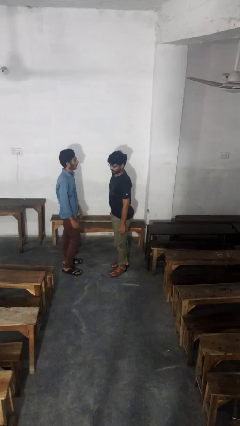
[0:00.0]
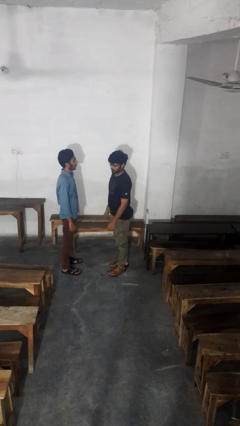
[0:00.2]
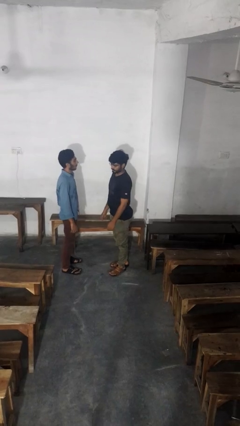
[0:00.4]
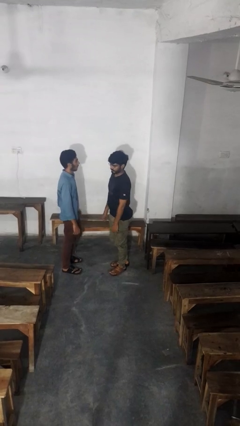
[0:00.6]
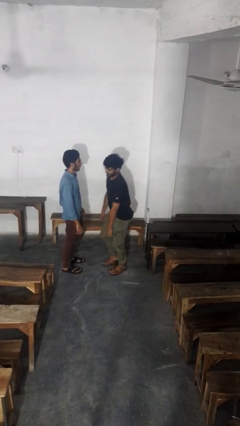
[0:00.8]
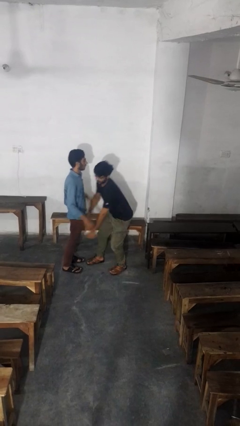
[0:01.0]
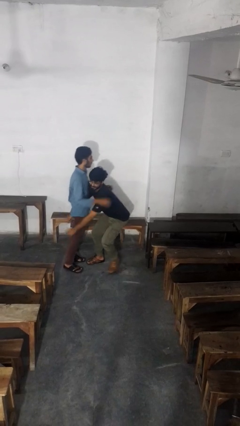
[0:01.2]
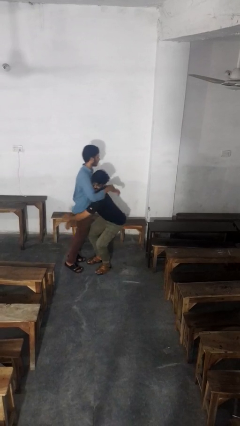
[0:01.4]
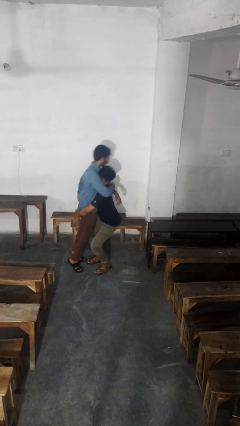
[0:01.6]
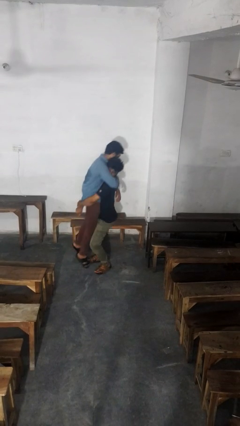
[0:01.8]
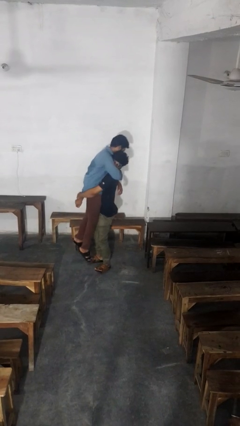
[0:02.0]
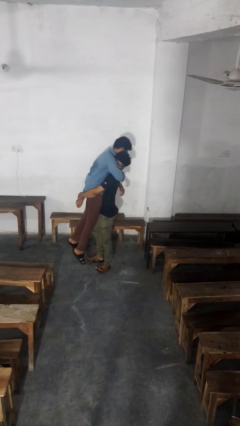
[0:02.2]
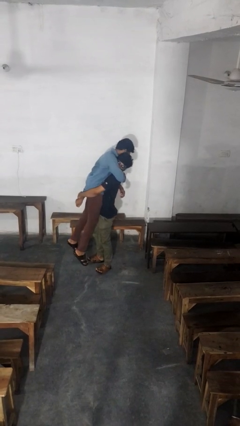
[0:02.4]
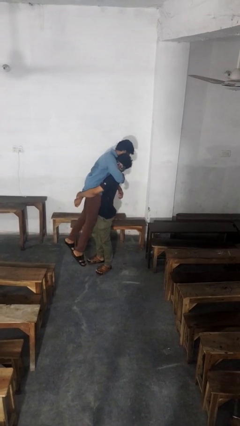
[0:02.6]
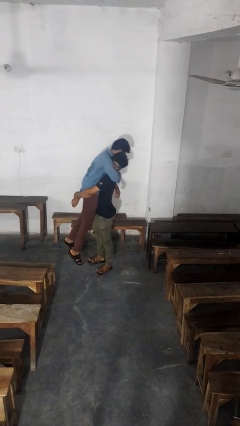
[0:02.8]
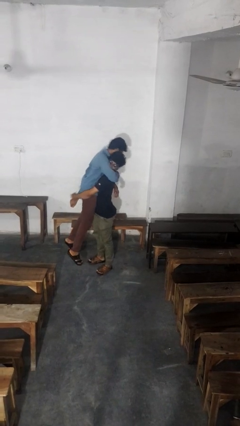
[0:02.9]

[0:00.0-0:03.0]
person picks up person

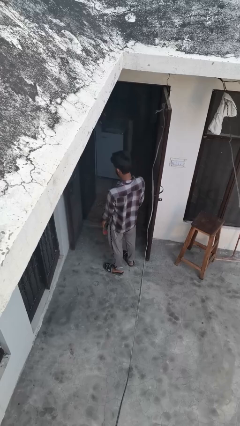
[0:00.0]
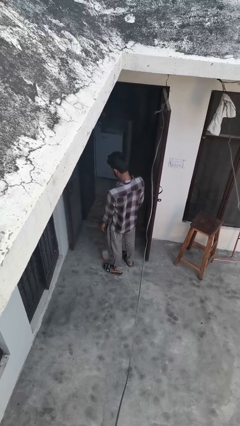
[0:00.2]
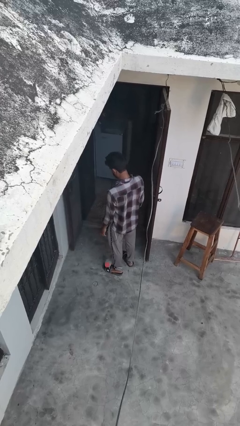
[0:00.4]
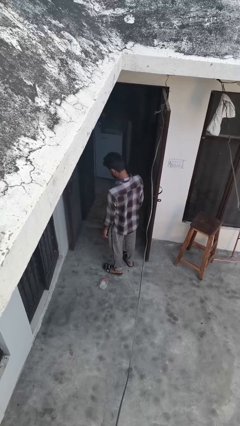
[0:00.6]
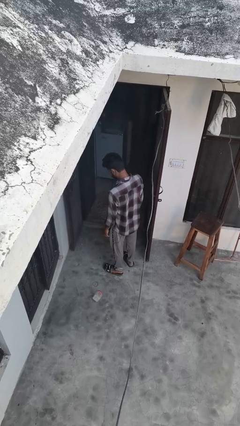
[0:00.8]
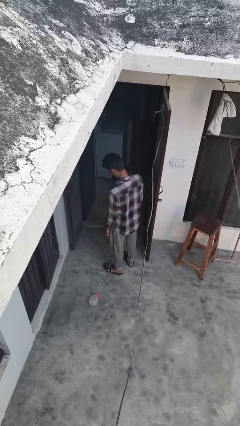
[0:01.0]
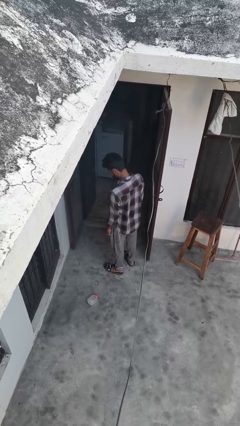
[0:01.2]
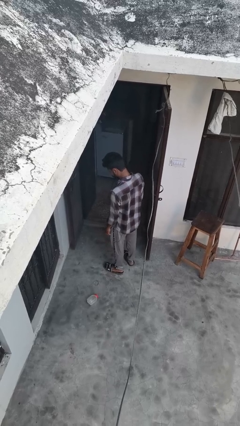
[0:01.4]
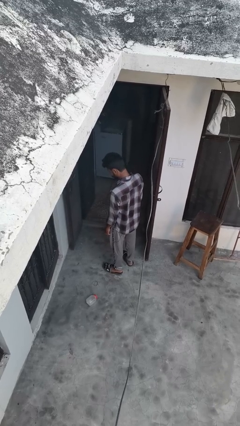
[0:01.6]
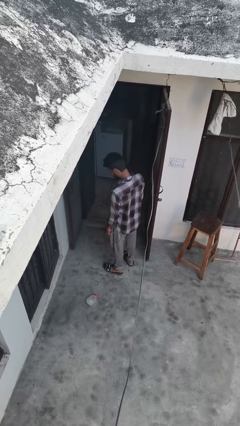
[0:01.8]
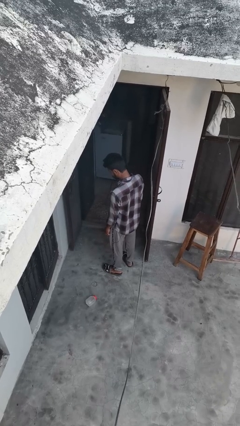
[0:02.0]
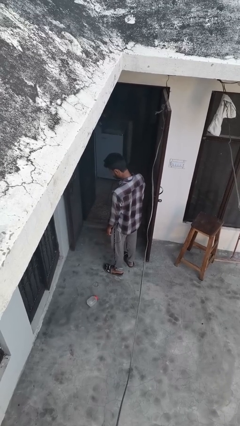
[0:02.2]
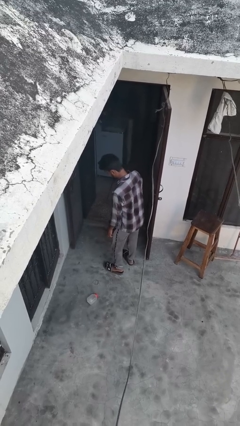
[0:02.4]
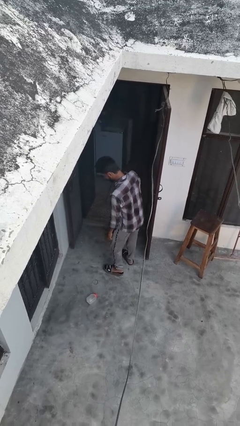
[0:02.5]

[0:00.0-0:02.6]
person drops object

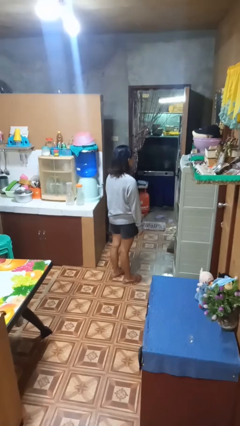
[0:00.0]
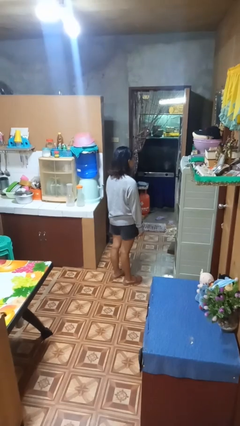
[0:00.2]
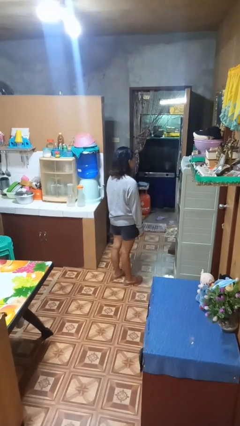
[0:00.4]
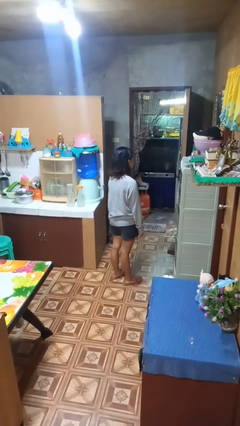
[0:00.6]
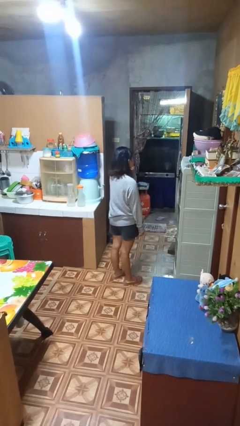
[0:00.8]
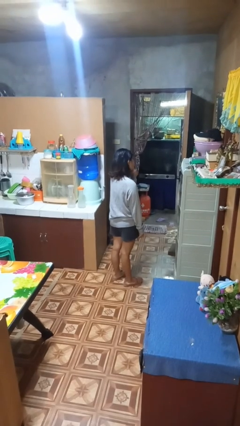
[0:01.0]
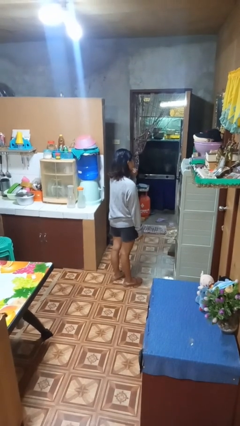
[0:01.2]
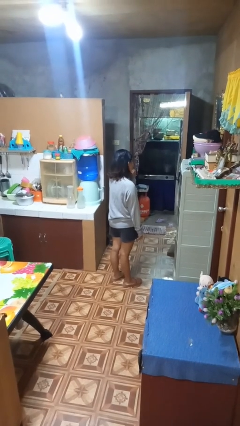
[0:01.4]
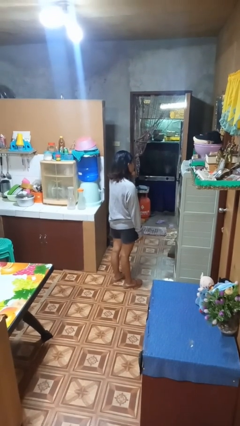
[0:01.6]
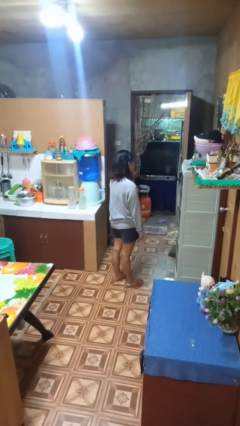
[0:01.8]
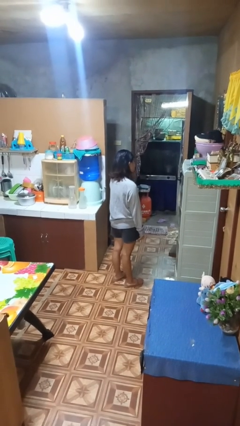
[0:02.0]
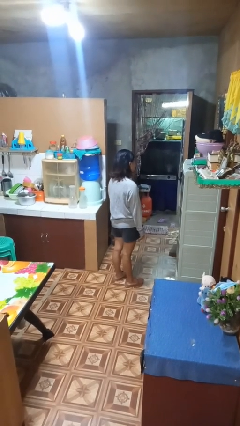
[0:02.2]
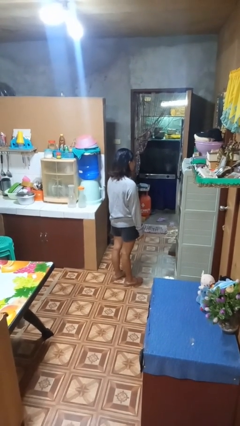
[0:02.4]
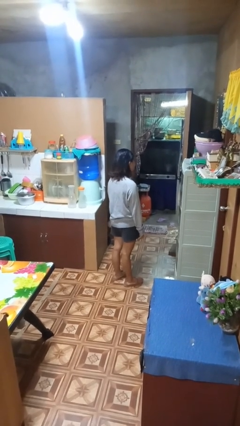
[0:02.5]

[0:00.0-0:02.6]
person strokes chin

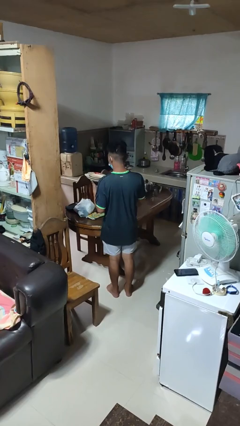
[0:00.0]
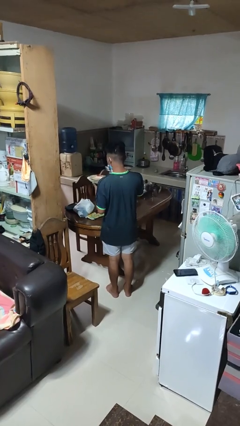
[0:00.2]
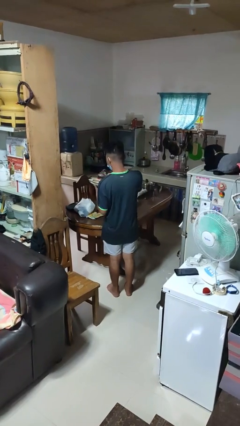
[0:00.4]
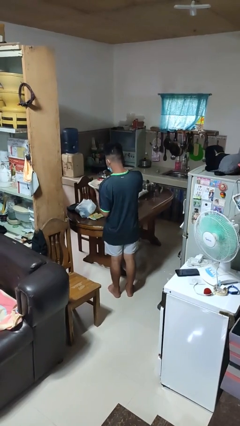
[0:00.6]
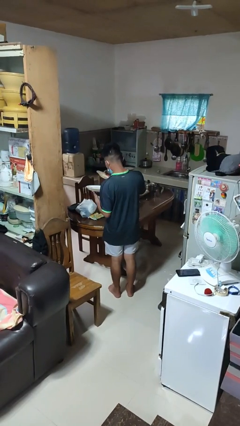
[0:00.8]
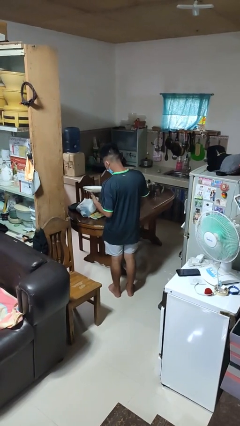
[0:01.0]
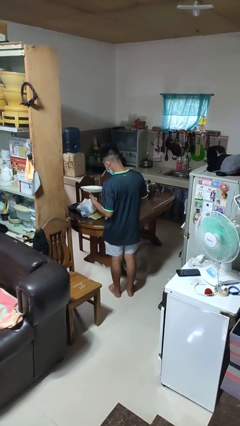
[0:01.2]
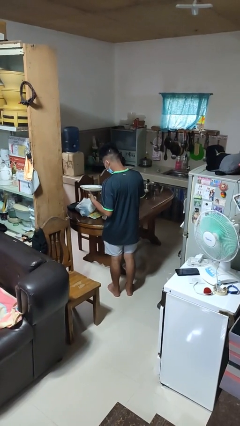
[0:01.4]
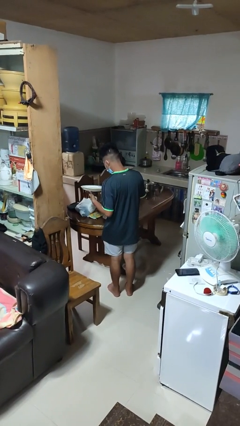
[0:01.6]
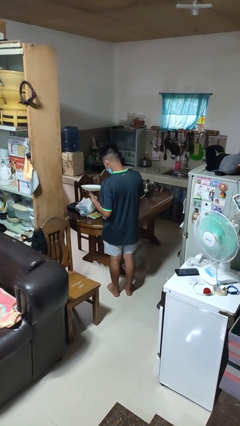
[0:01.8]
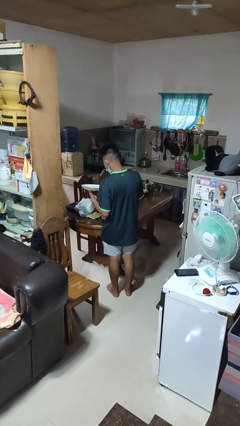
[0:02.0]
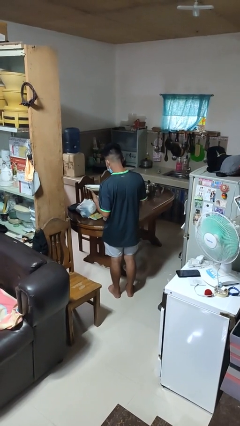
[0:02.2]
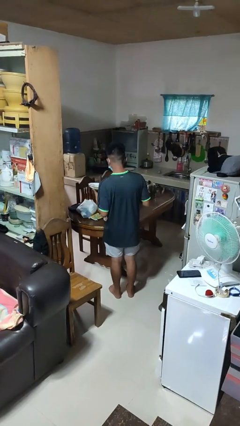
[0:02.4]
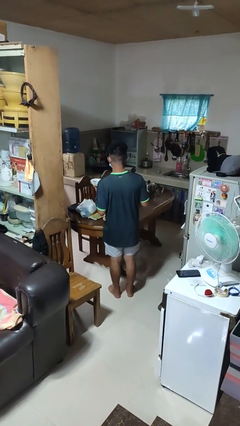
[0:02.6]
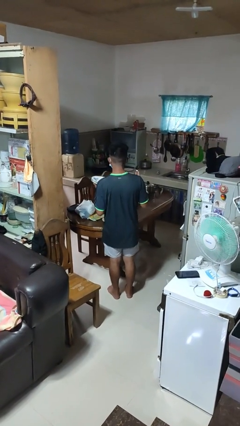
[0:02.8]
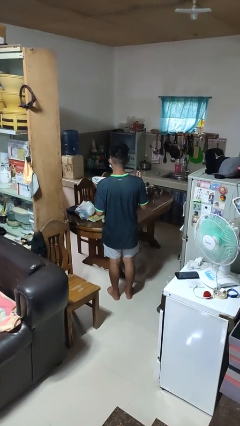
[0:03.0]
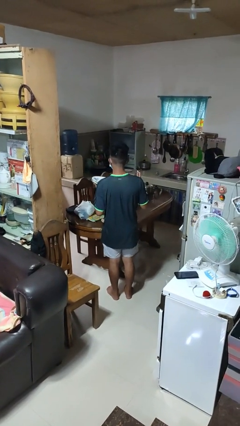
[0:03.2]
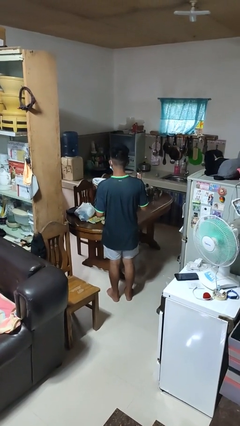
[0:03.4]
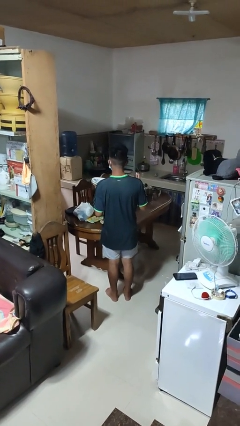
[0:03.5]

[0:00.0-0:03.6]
person sets table

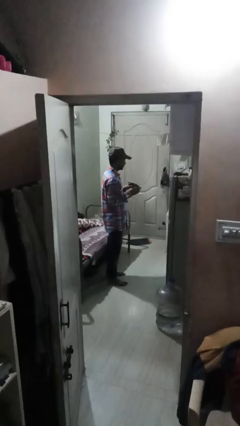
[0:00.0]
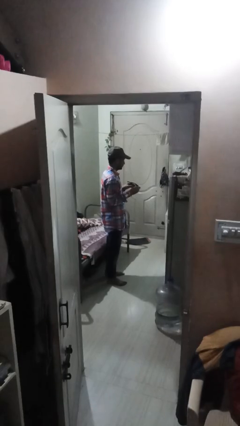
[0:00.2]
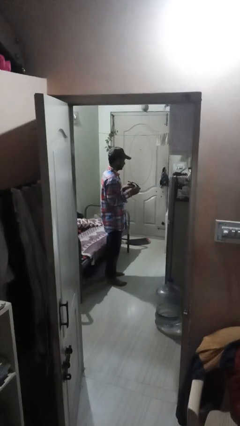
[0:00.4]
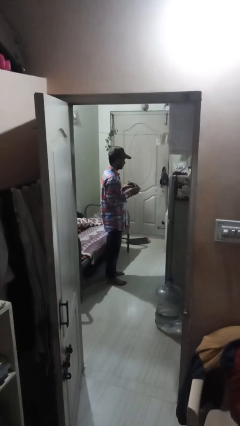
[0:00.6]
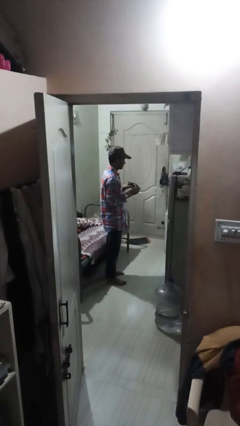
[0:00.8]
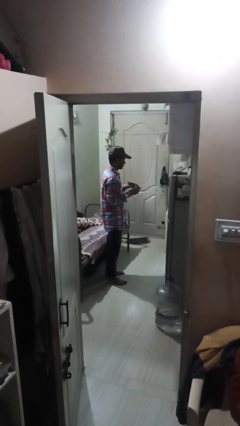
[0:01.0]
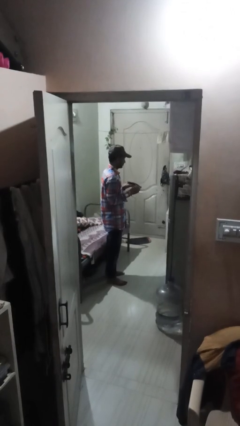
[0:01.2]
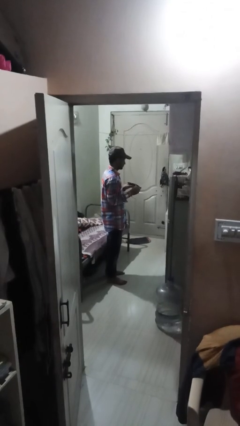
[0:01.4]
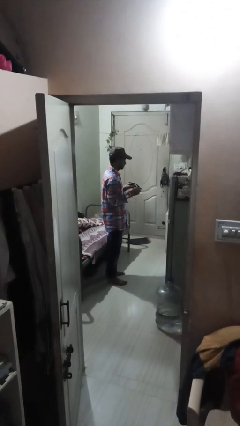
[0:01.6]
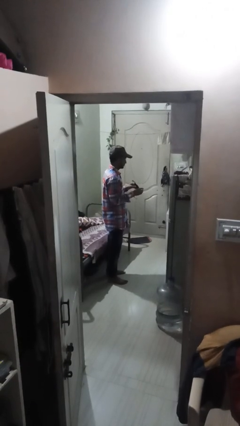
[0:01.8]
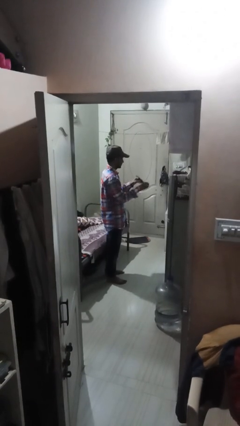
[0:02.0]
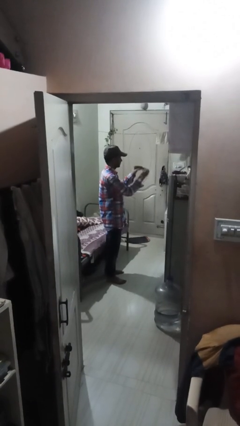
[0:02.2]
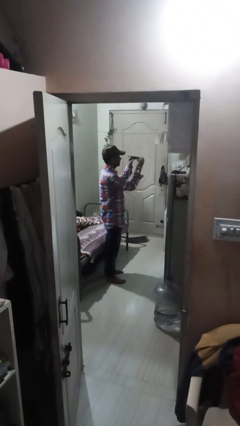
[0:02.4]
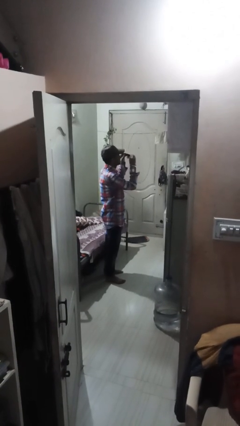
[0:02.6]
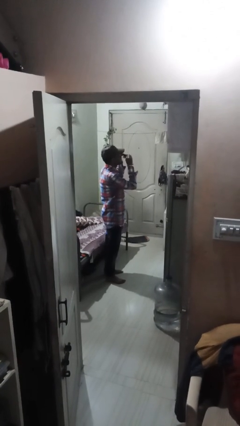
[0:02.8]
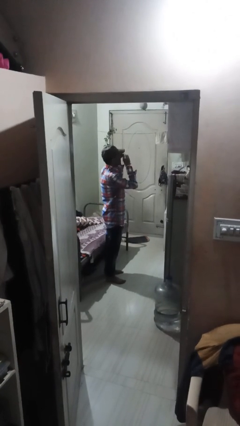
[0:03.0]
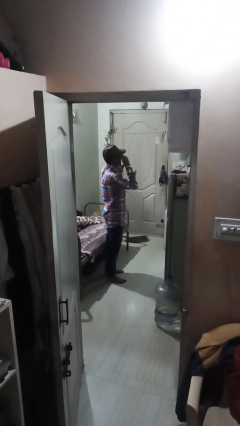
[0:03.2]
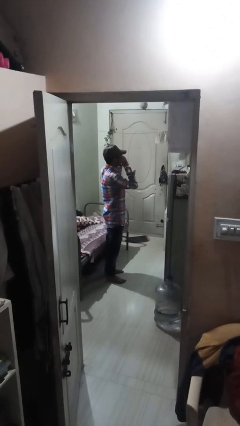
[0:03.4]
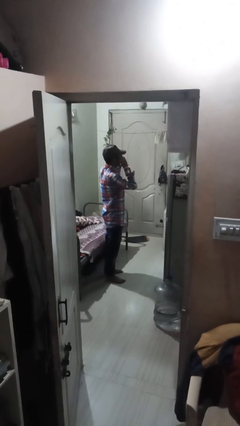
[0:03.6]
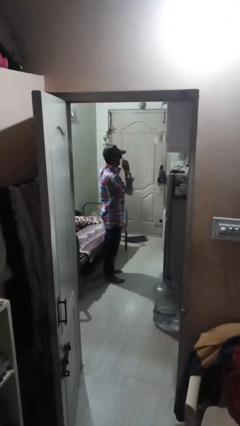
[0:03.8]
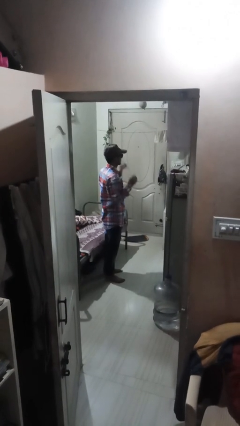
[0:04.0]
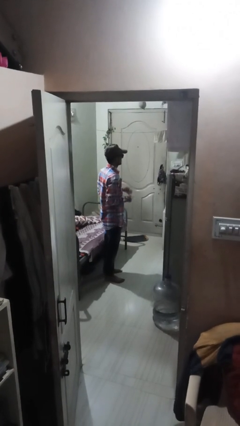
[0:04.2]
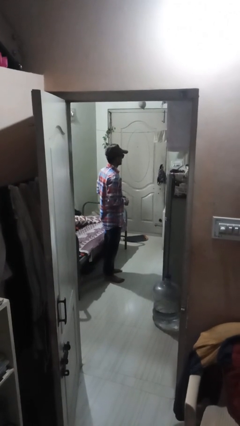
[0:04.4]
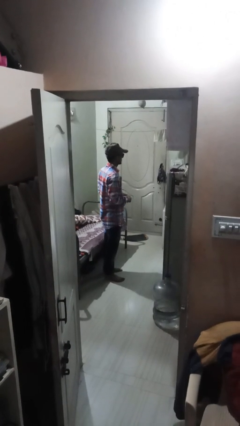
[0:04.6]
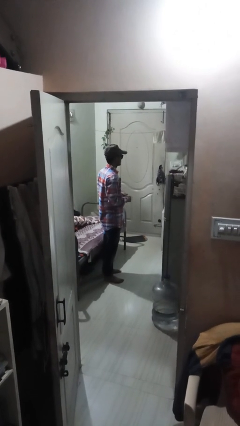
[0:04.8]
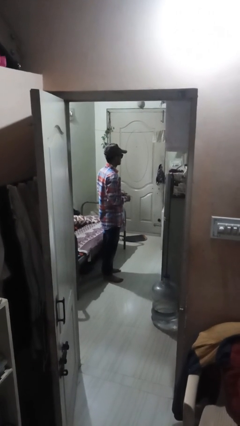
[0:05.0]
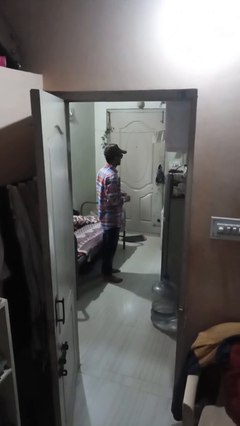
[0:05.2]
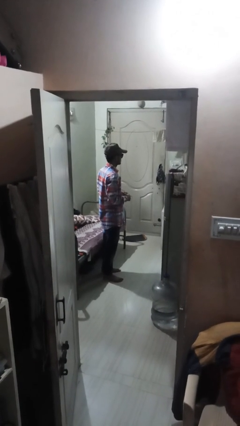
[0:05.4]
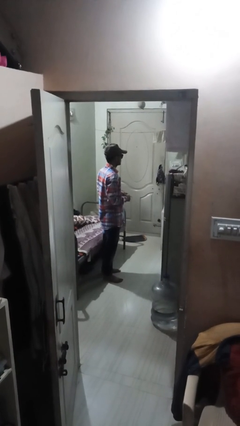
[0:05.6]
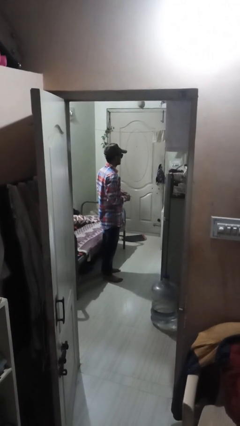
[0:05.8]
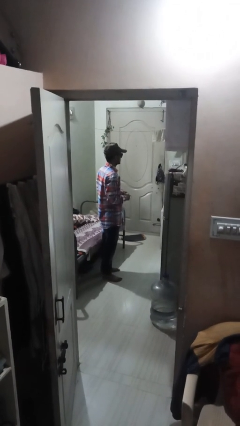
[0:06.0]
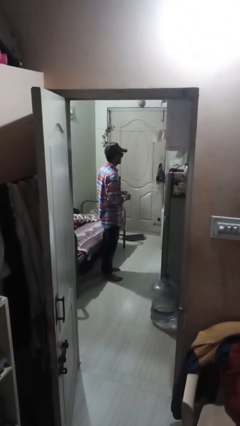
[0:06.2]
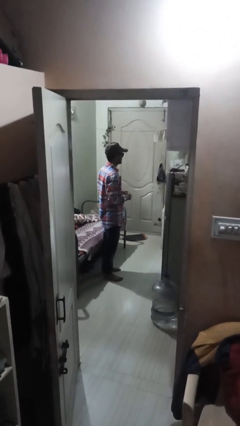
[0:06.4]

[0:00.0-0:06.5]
person puts on sunglasses
